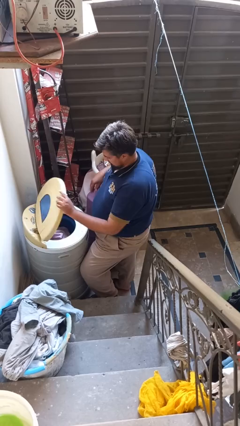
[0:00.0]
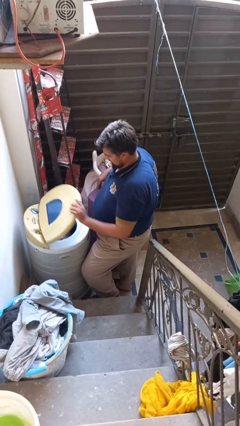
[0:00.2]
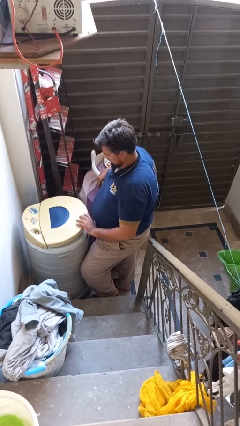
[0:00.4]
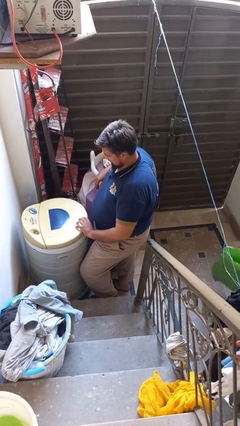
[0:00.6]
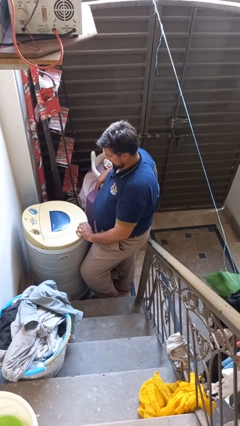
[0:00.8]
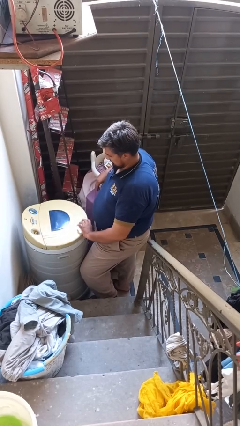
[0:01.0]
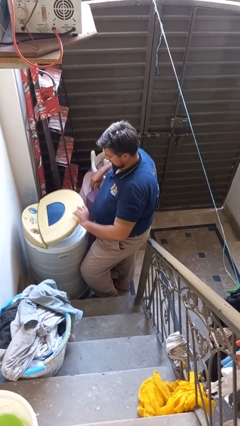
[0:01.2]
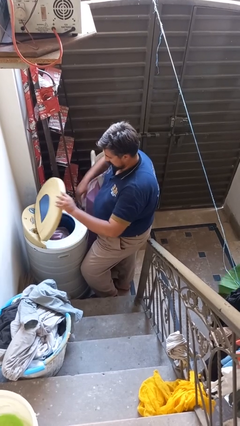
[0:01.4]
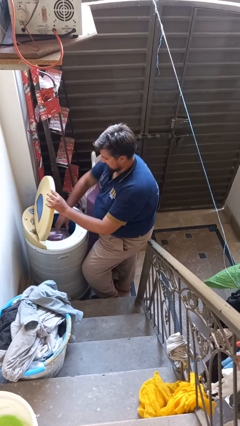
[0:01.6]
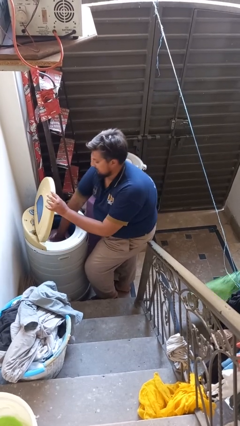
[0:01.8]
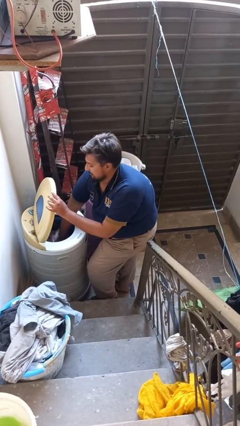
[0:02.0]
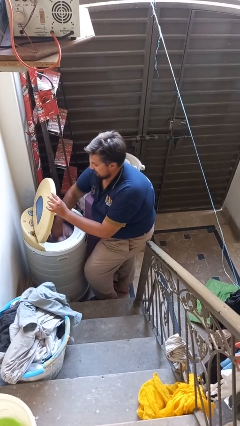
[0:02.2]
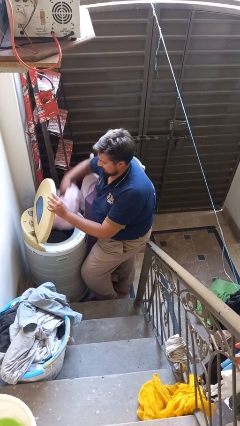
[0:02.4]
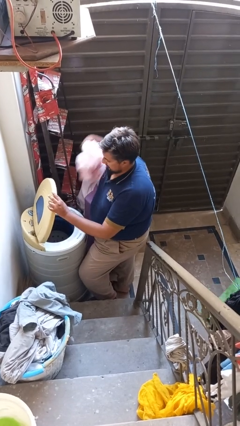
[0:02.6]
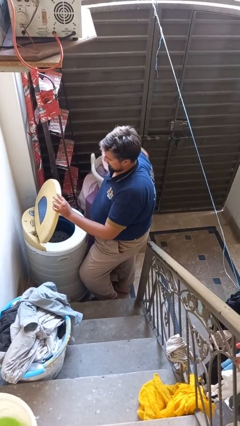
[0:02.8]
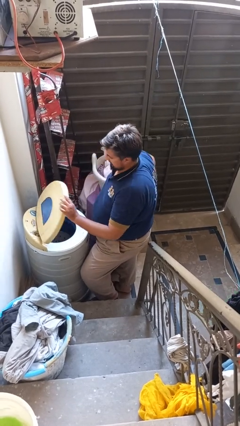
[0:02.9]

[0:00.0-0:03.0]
person unloads dryer

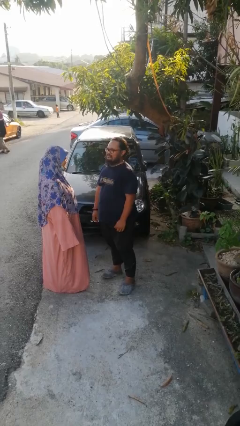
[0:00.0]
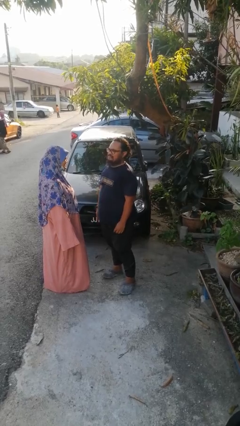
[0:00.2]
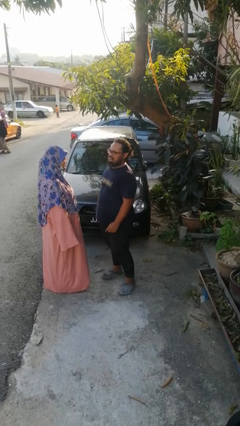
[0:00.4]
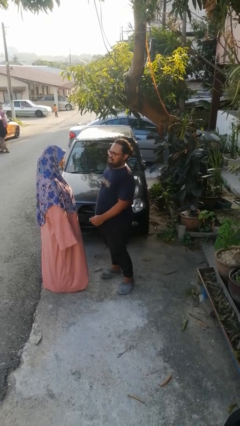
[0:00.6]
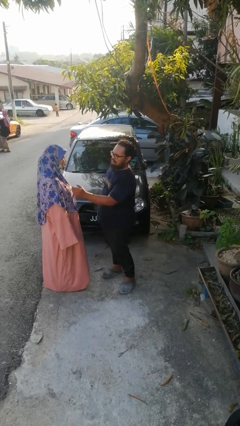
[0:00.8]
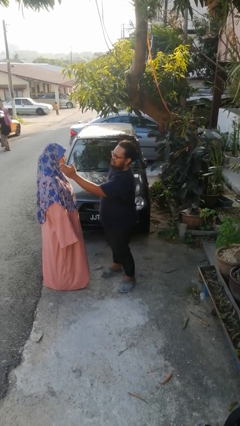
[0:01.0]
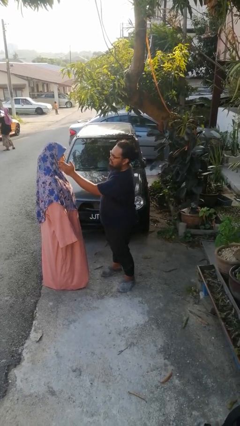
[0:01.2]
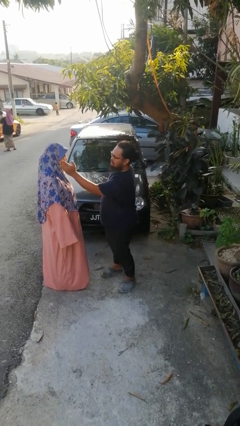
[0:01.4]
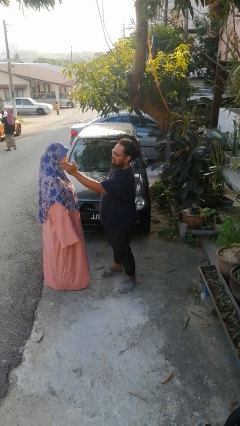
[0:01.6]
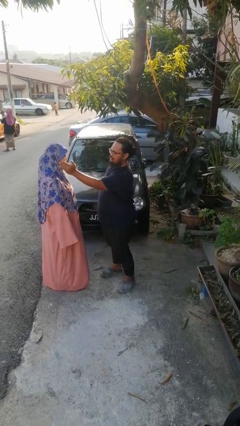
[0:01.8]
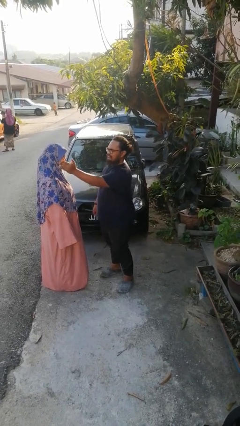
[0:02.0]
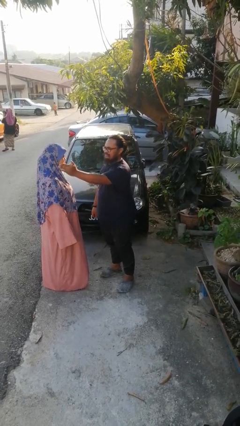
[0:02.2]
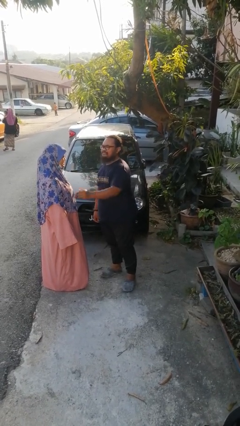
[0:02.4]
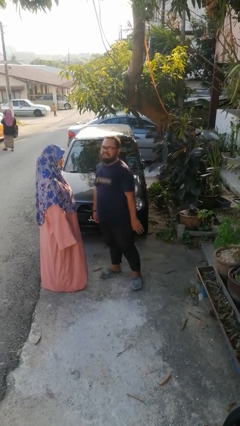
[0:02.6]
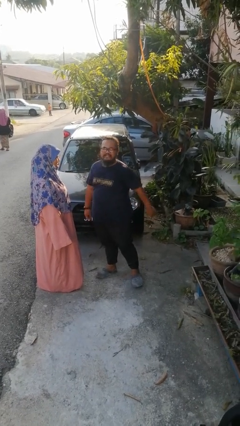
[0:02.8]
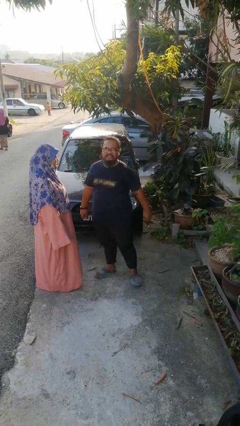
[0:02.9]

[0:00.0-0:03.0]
person touches face of person

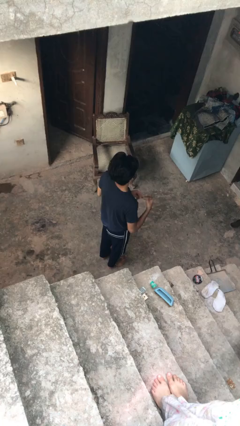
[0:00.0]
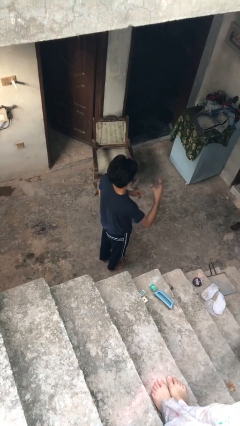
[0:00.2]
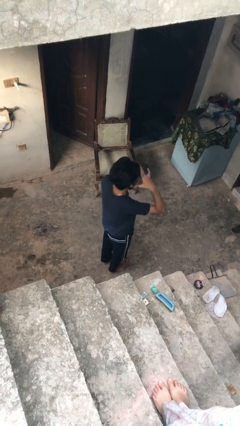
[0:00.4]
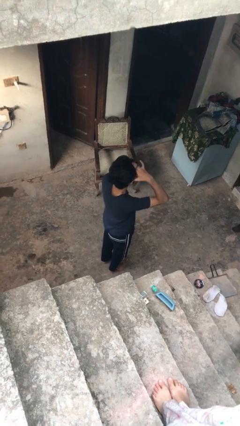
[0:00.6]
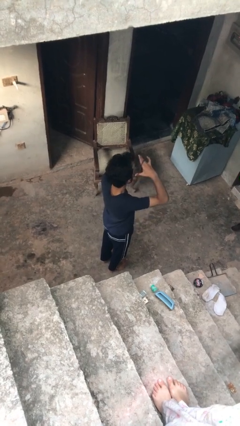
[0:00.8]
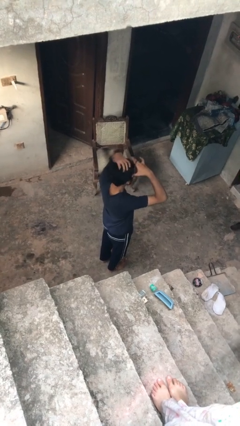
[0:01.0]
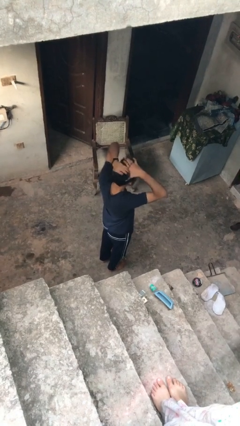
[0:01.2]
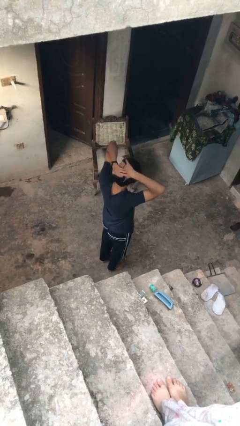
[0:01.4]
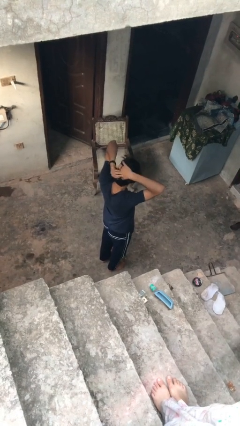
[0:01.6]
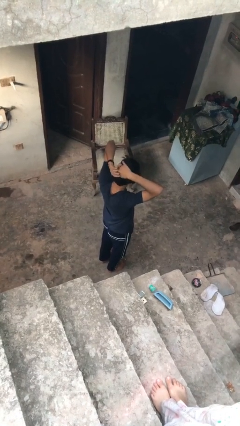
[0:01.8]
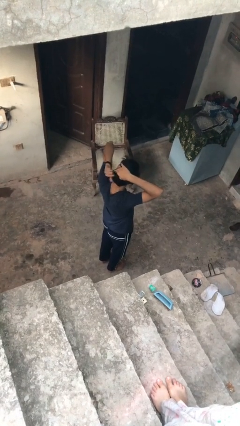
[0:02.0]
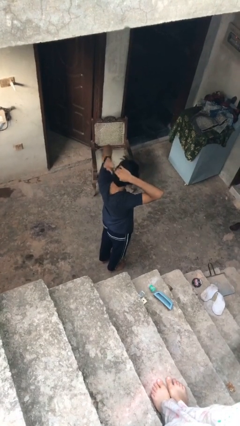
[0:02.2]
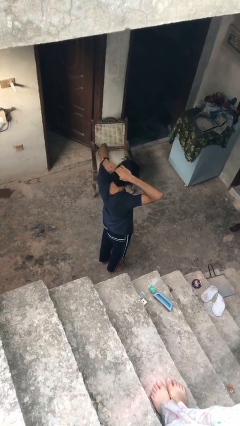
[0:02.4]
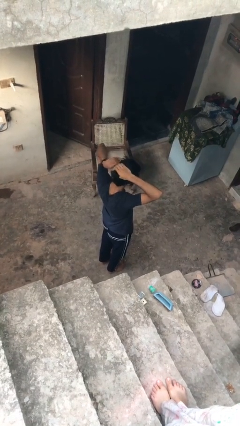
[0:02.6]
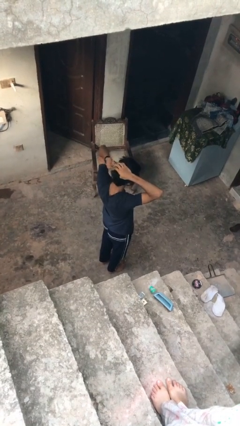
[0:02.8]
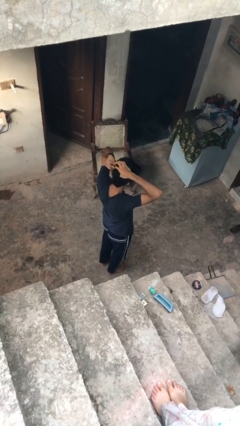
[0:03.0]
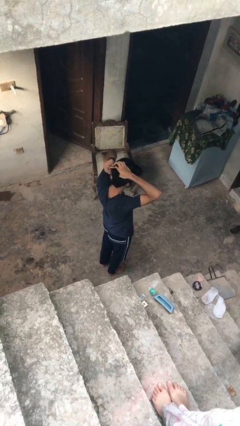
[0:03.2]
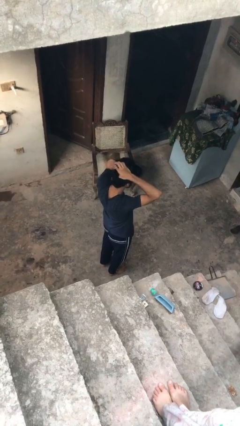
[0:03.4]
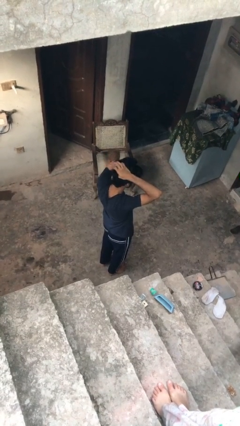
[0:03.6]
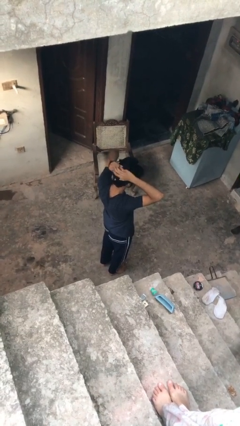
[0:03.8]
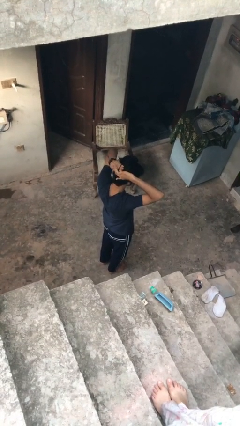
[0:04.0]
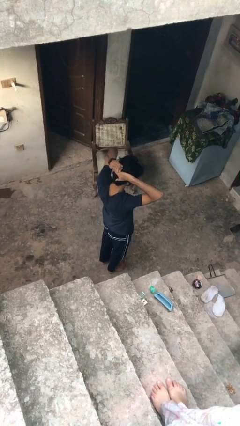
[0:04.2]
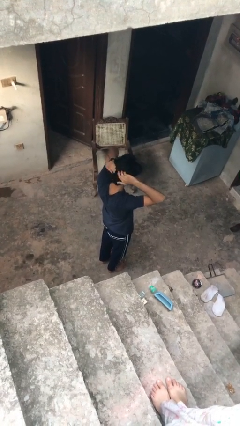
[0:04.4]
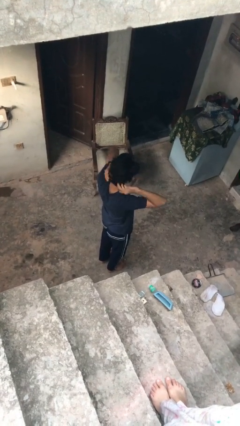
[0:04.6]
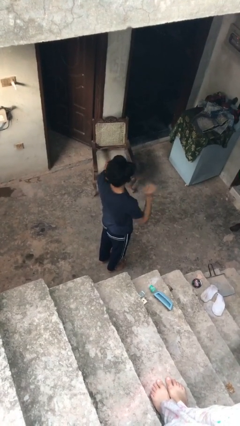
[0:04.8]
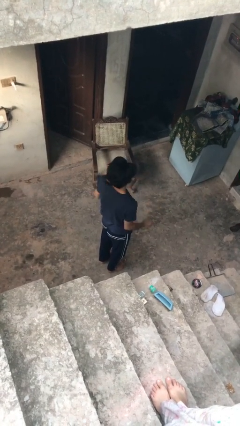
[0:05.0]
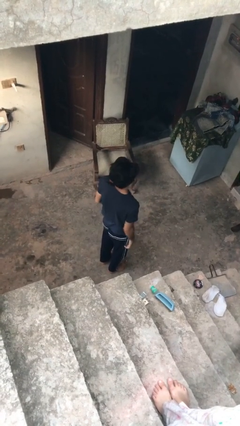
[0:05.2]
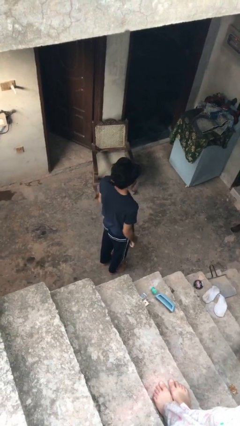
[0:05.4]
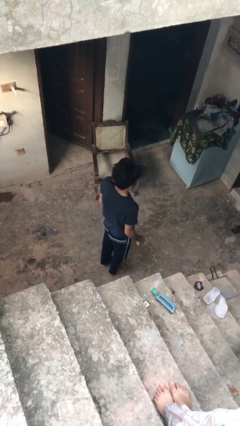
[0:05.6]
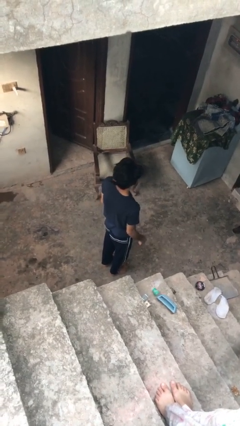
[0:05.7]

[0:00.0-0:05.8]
person puts hair in ponytail

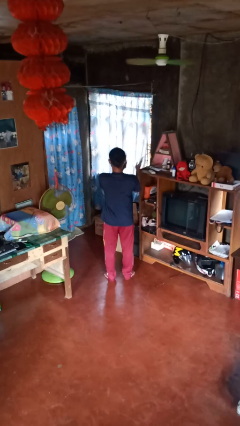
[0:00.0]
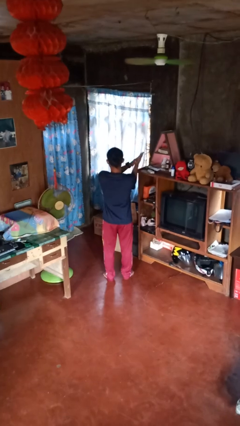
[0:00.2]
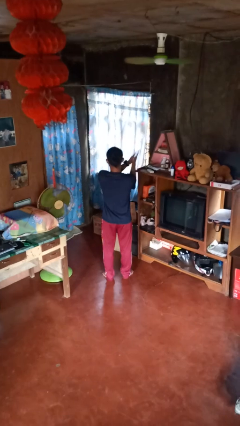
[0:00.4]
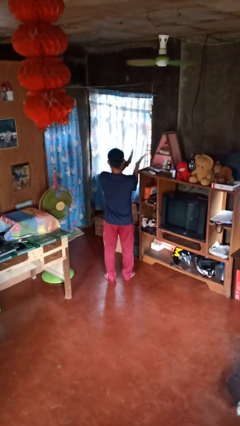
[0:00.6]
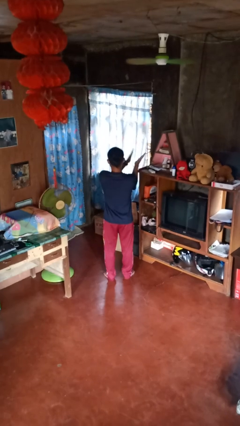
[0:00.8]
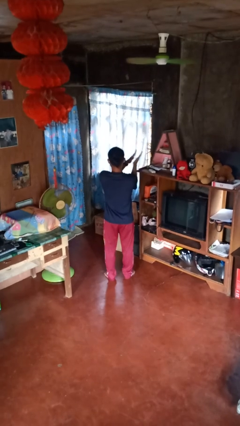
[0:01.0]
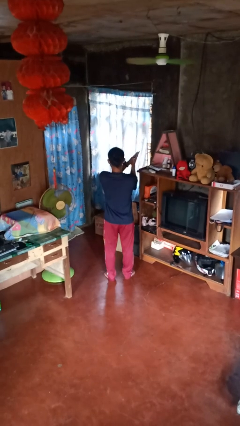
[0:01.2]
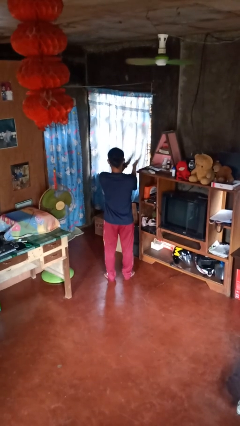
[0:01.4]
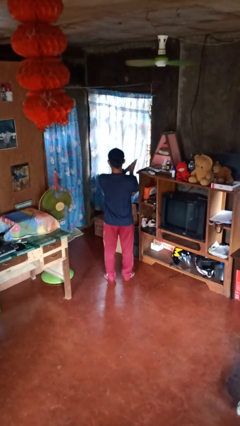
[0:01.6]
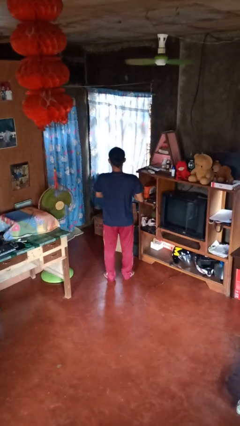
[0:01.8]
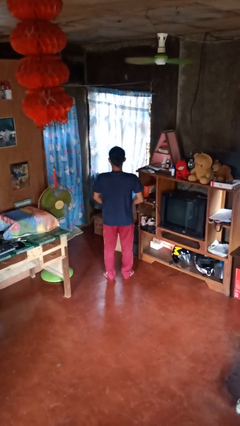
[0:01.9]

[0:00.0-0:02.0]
person claps hands

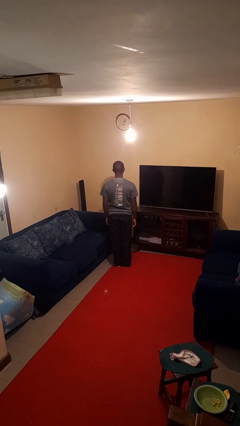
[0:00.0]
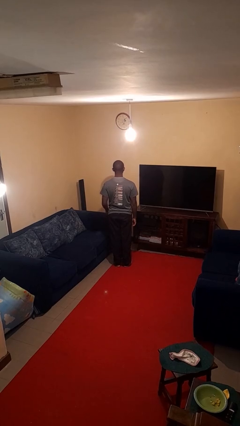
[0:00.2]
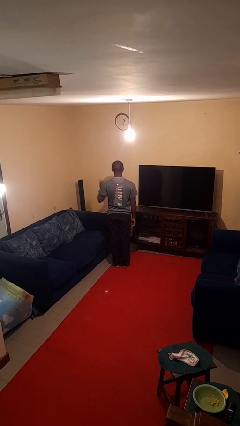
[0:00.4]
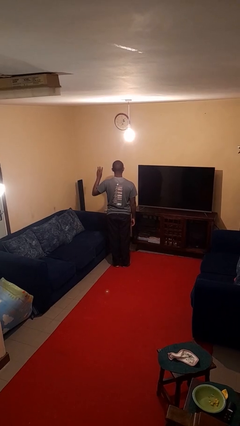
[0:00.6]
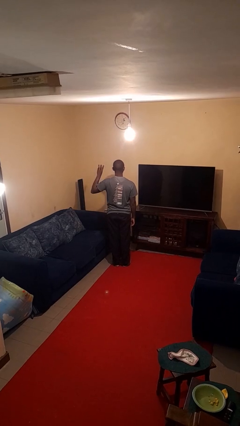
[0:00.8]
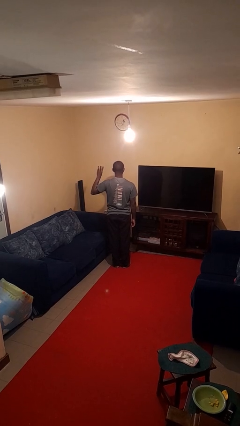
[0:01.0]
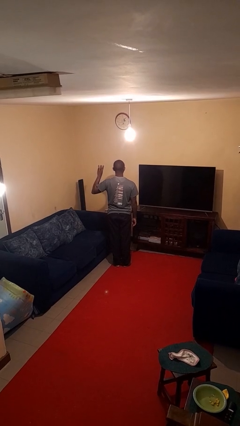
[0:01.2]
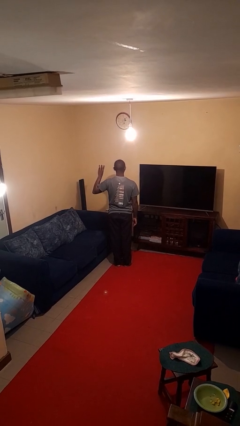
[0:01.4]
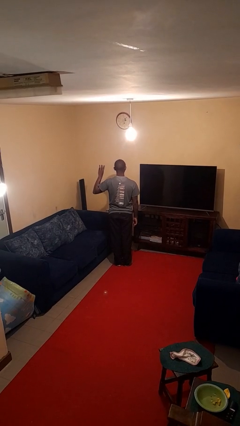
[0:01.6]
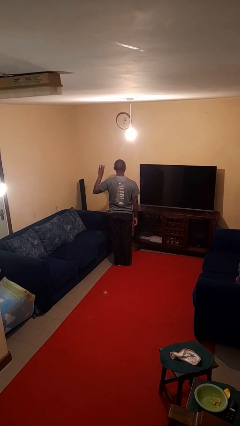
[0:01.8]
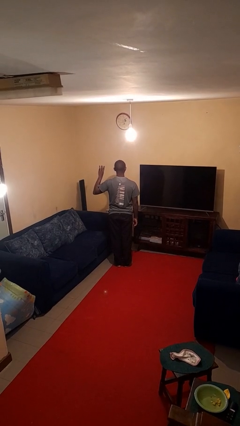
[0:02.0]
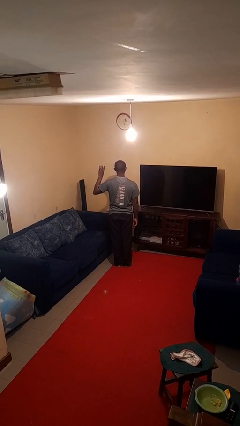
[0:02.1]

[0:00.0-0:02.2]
person gestures number three

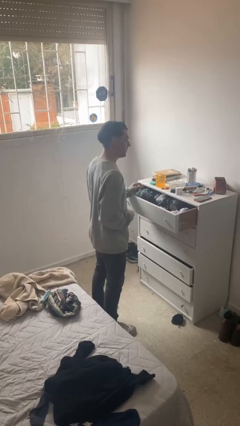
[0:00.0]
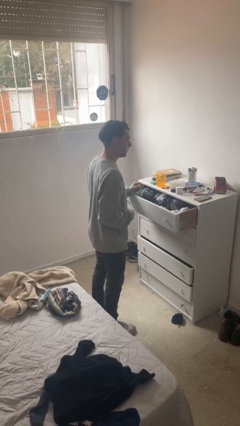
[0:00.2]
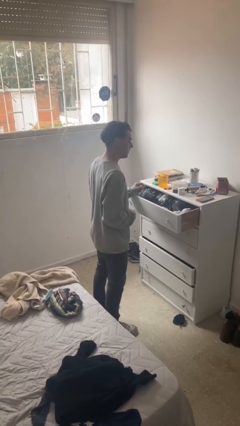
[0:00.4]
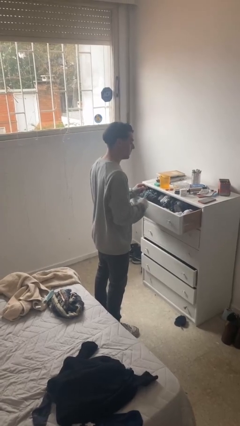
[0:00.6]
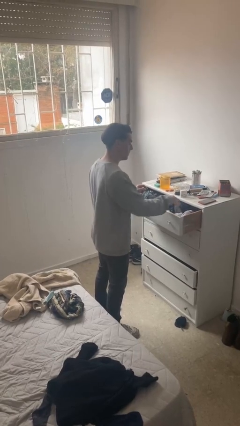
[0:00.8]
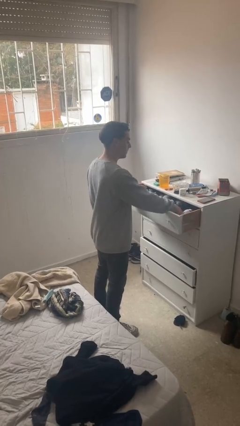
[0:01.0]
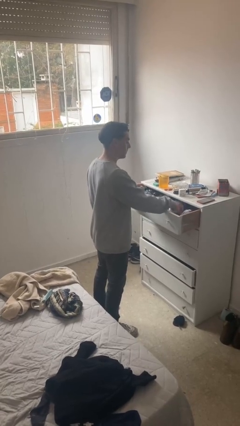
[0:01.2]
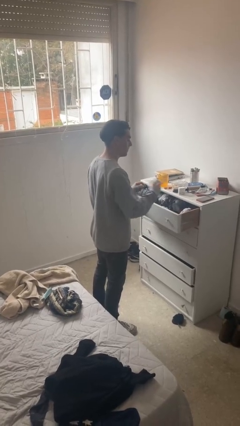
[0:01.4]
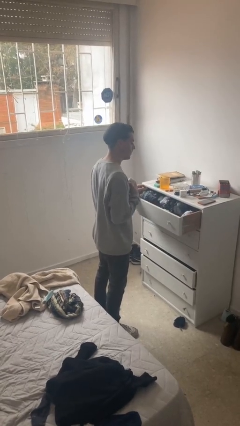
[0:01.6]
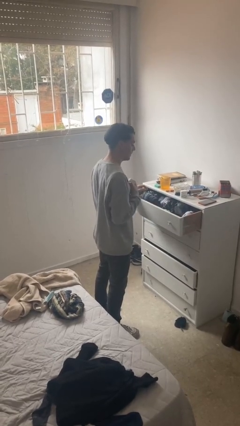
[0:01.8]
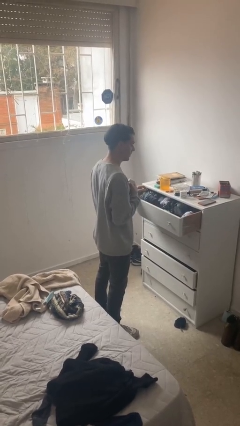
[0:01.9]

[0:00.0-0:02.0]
person takes clothes from dresser
